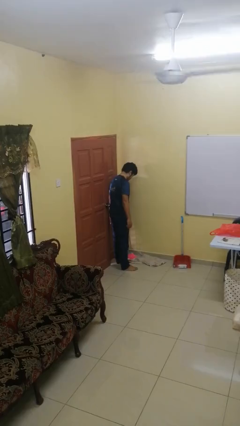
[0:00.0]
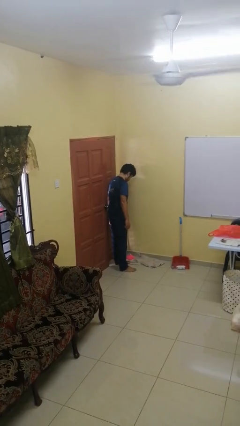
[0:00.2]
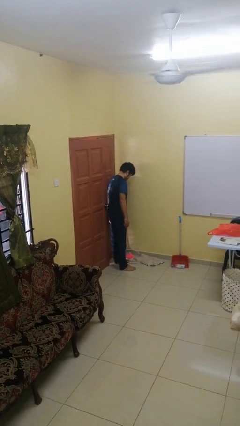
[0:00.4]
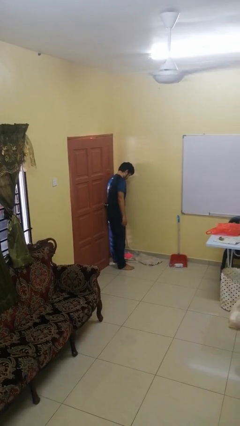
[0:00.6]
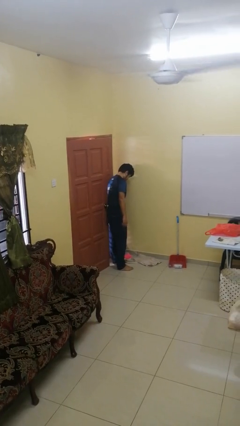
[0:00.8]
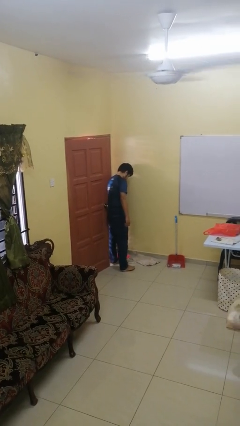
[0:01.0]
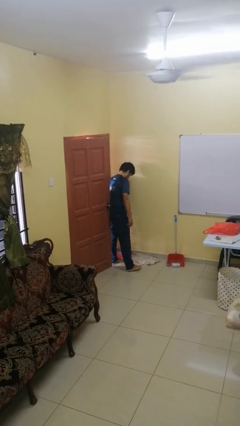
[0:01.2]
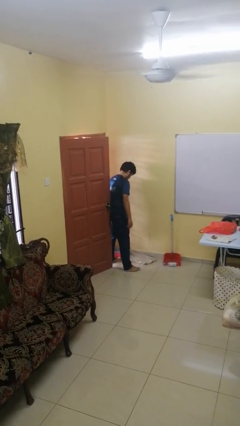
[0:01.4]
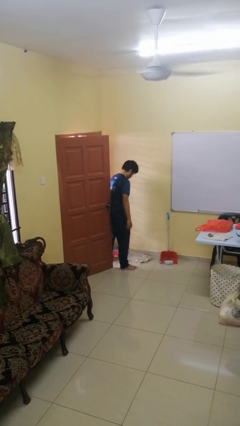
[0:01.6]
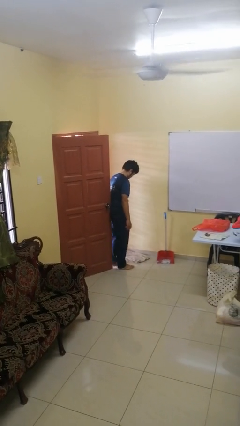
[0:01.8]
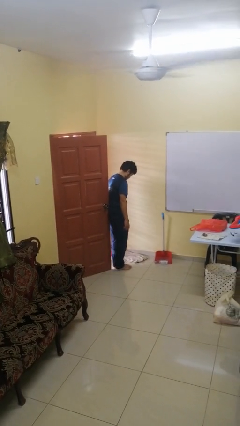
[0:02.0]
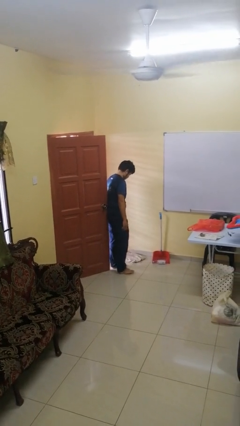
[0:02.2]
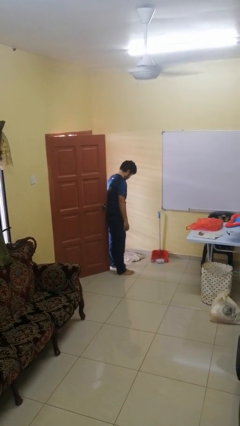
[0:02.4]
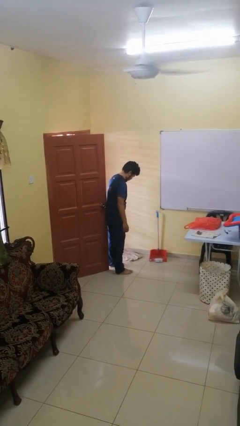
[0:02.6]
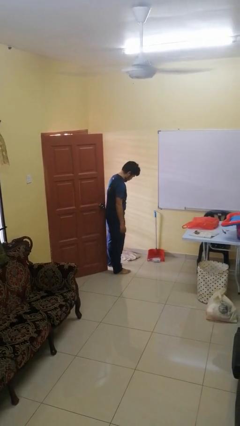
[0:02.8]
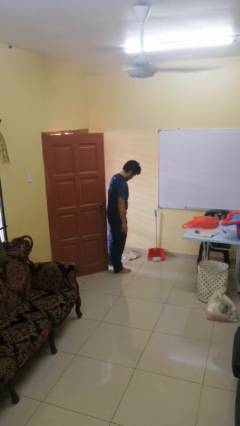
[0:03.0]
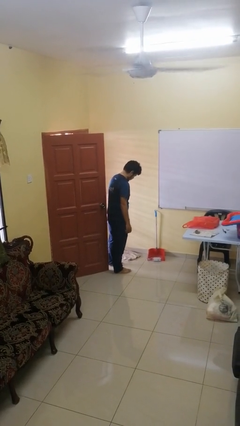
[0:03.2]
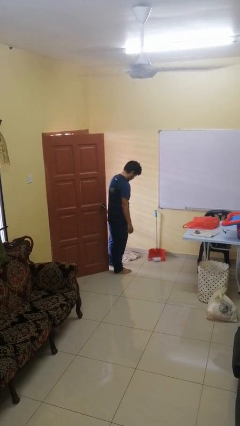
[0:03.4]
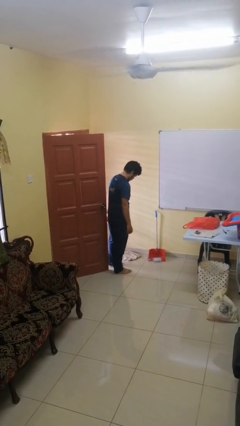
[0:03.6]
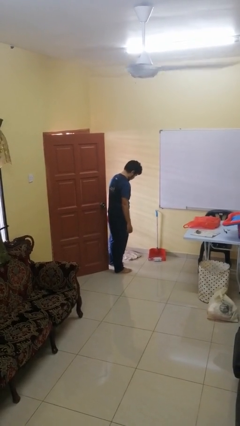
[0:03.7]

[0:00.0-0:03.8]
person opens facility door

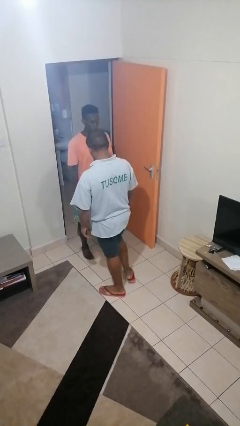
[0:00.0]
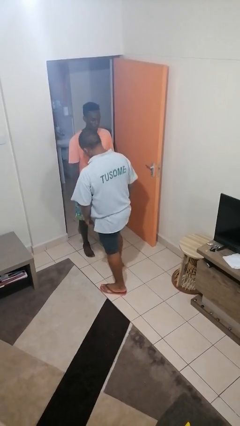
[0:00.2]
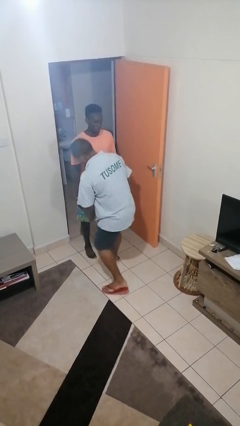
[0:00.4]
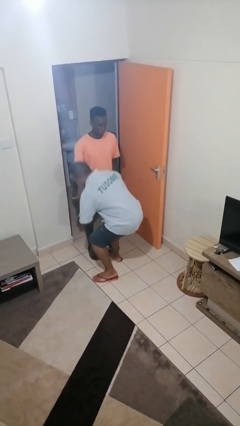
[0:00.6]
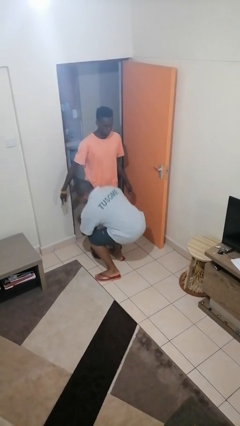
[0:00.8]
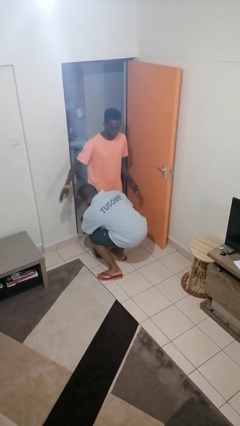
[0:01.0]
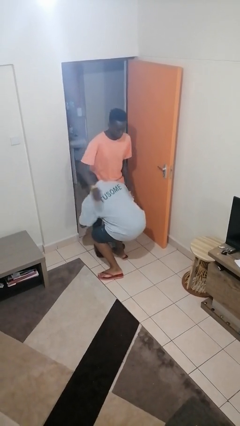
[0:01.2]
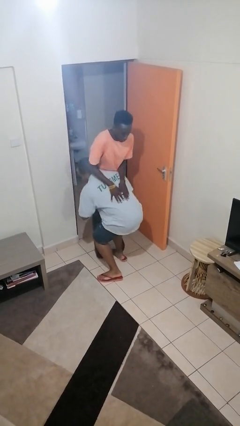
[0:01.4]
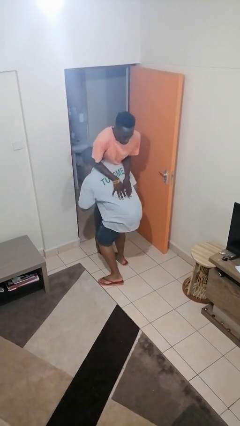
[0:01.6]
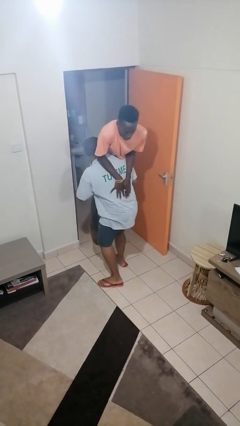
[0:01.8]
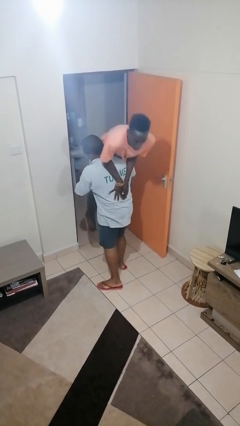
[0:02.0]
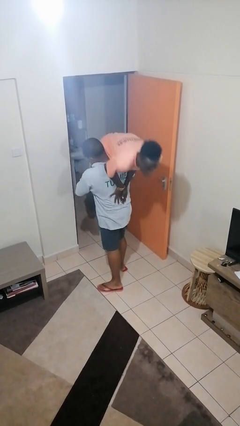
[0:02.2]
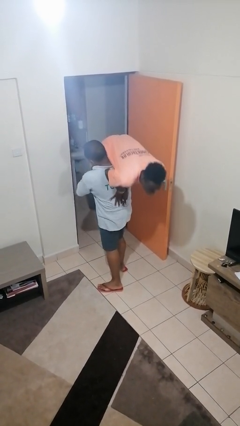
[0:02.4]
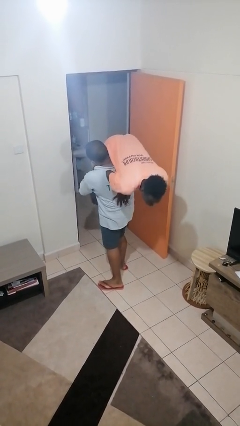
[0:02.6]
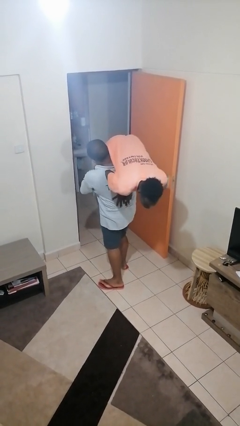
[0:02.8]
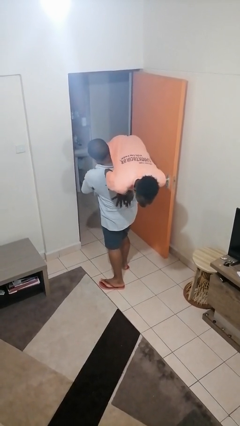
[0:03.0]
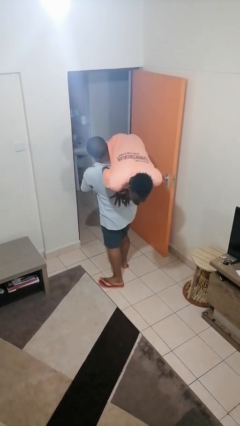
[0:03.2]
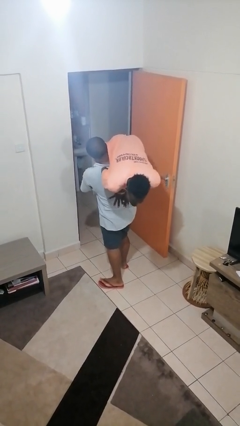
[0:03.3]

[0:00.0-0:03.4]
person carries person over shoulder

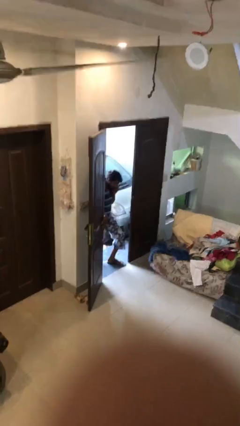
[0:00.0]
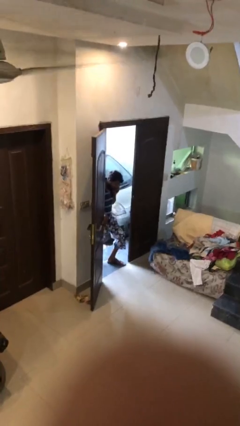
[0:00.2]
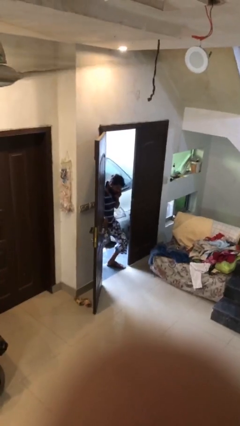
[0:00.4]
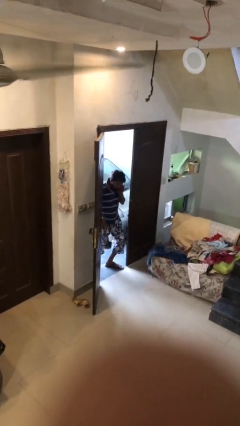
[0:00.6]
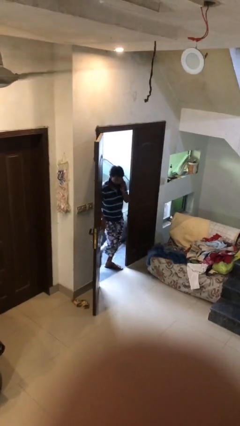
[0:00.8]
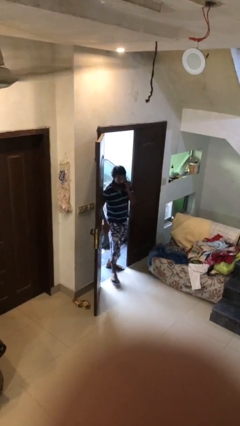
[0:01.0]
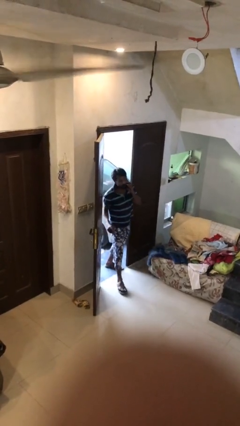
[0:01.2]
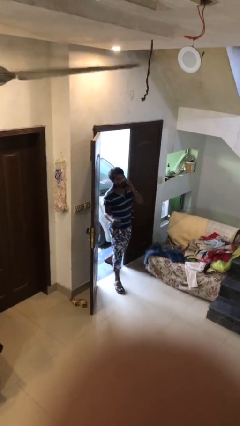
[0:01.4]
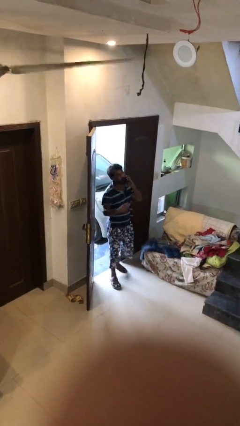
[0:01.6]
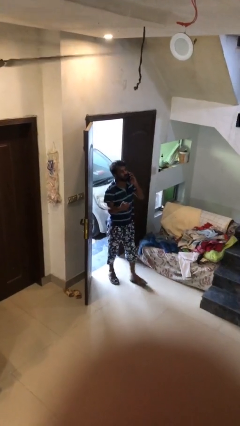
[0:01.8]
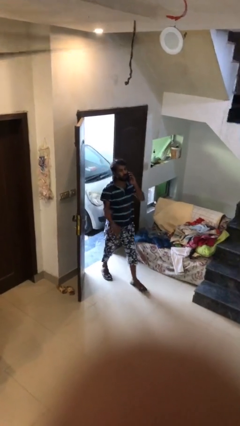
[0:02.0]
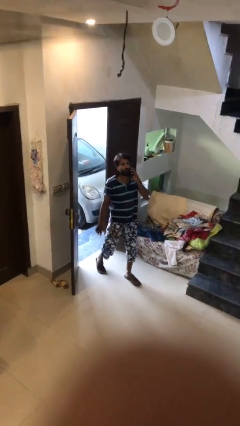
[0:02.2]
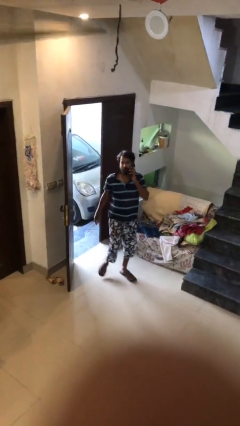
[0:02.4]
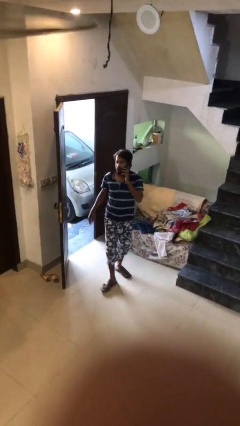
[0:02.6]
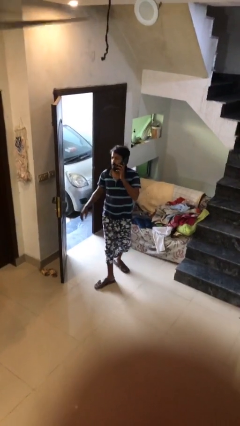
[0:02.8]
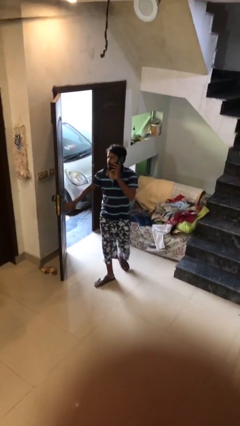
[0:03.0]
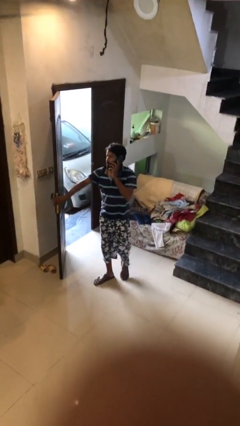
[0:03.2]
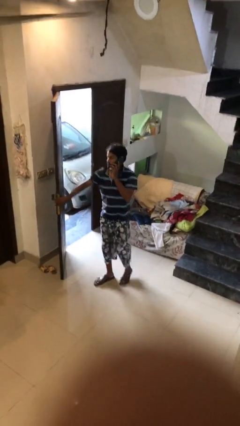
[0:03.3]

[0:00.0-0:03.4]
person enters scene through structure

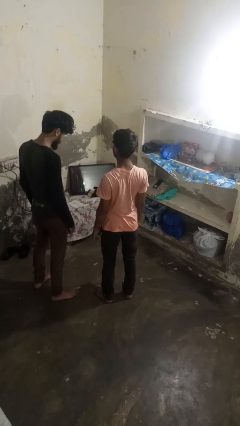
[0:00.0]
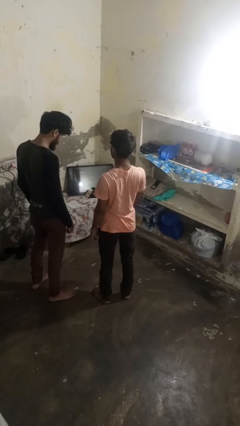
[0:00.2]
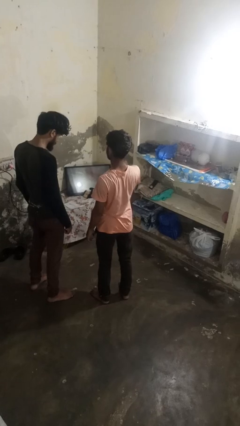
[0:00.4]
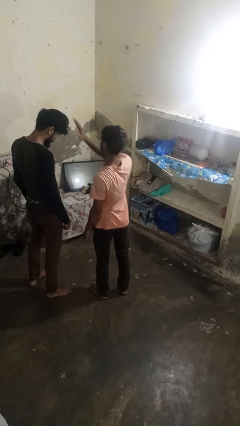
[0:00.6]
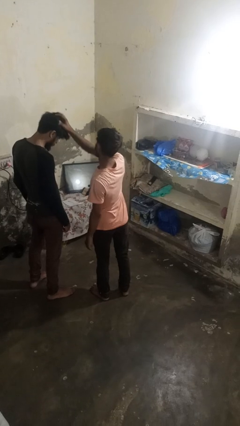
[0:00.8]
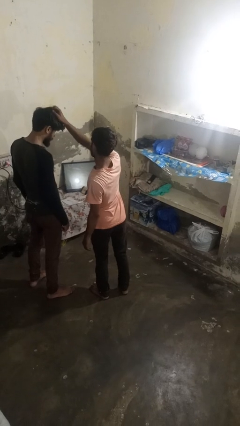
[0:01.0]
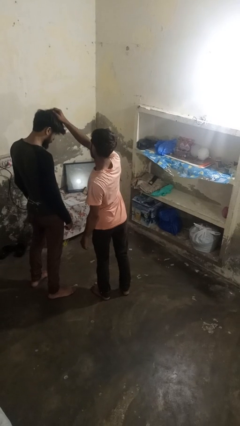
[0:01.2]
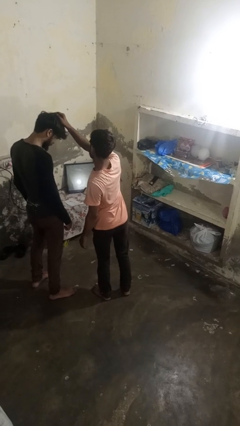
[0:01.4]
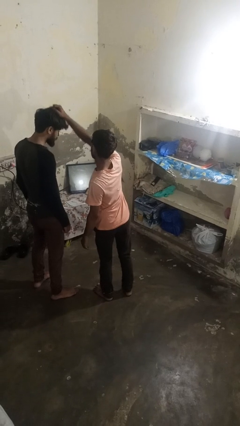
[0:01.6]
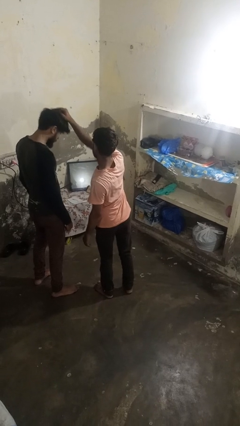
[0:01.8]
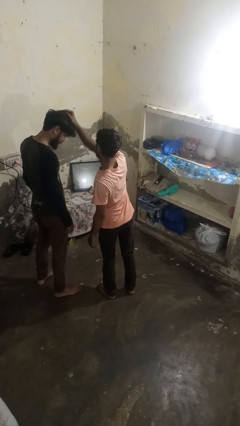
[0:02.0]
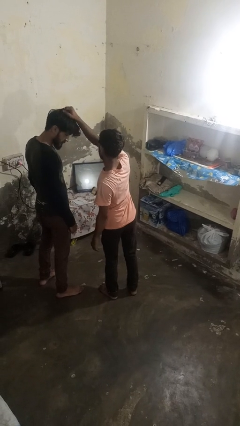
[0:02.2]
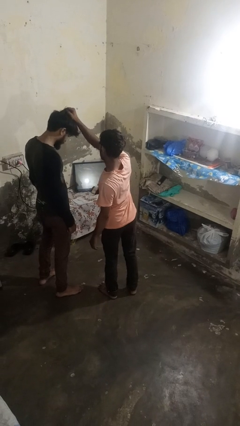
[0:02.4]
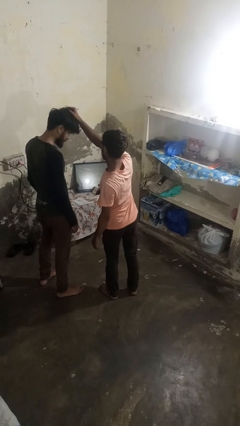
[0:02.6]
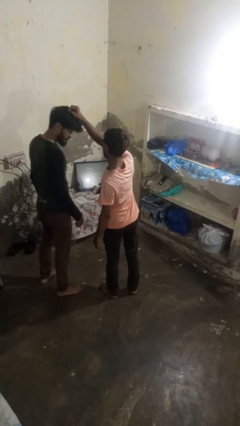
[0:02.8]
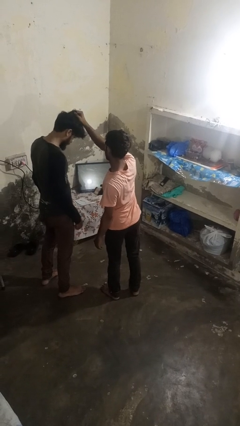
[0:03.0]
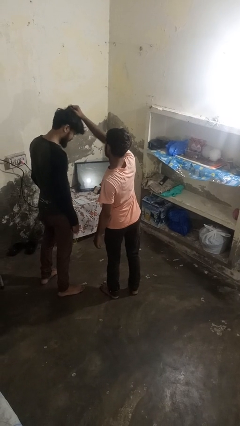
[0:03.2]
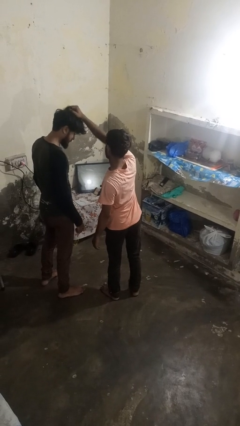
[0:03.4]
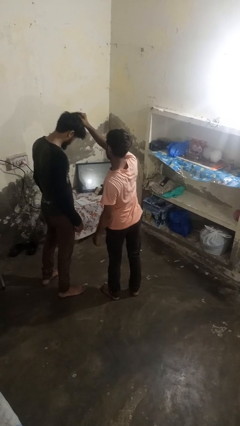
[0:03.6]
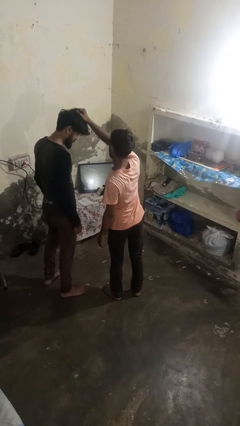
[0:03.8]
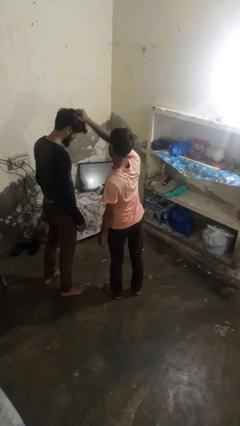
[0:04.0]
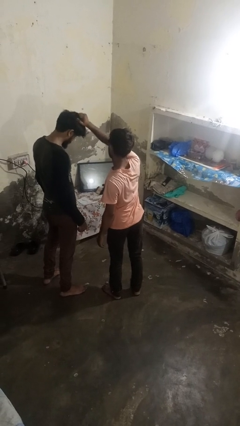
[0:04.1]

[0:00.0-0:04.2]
person grabs person by hair

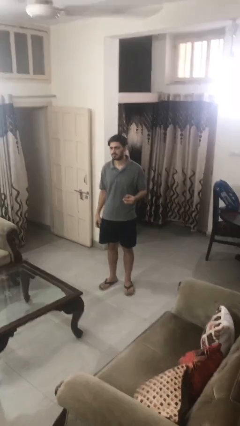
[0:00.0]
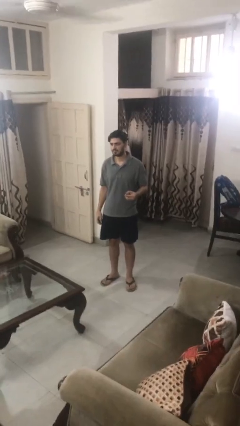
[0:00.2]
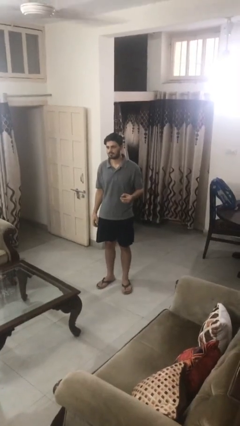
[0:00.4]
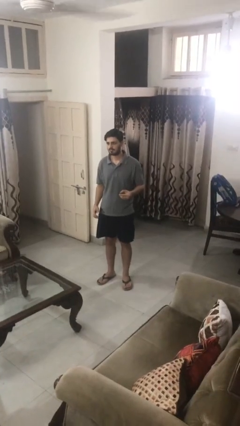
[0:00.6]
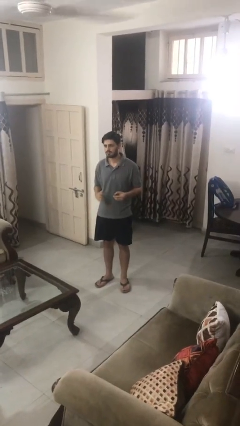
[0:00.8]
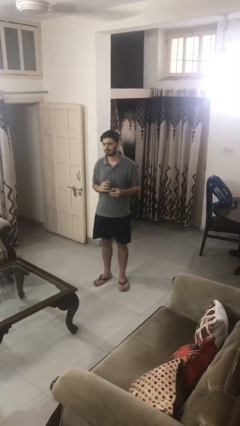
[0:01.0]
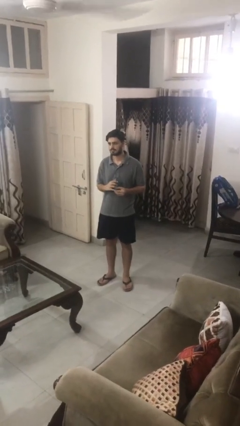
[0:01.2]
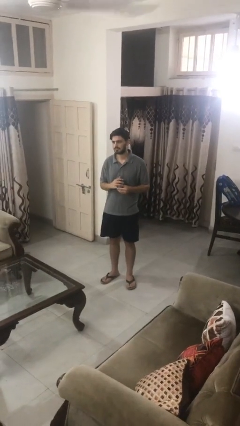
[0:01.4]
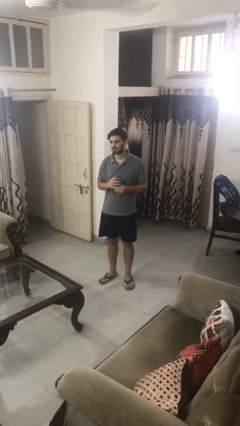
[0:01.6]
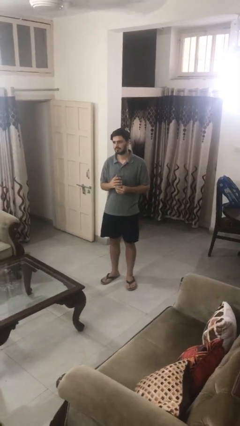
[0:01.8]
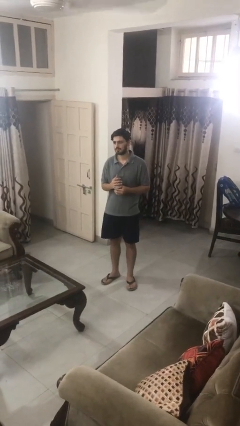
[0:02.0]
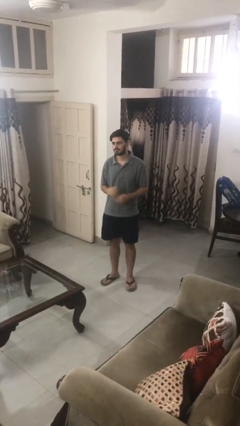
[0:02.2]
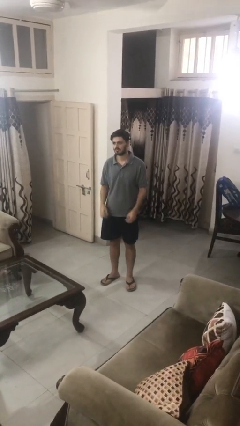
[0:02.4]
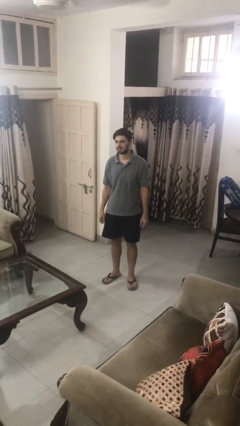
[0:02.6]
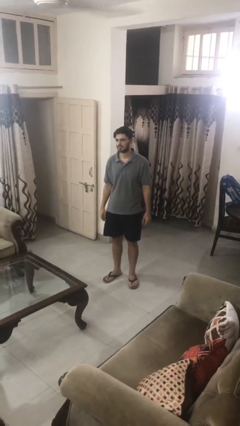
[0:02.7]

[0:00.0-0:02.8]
person puts on ring
